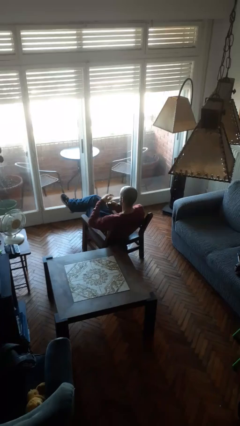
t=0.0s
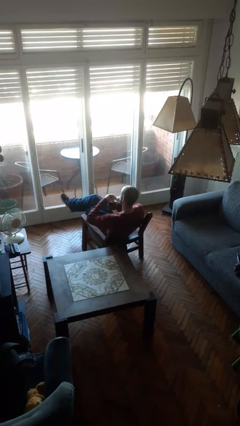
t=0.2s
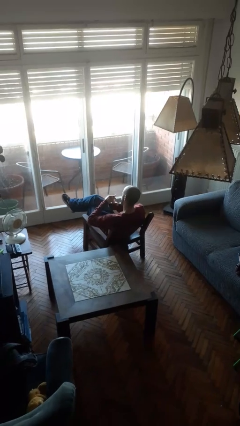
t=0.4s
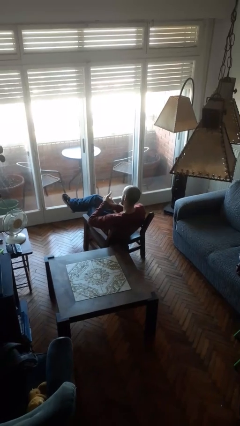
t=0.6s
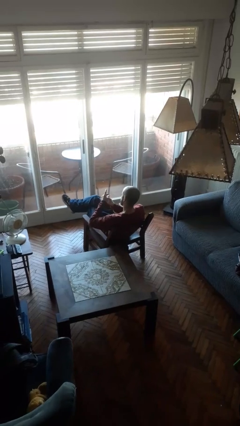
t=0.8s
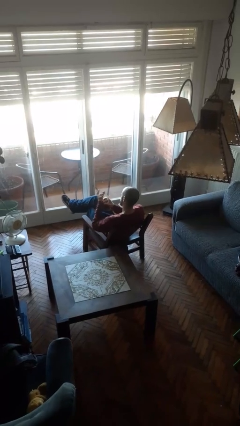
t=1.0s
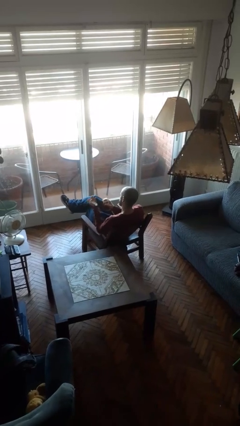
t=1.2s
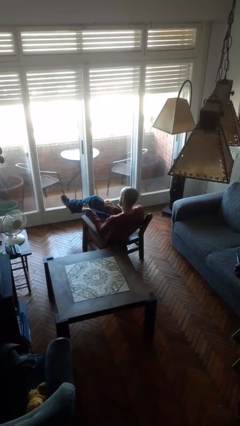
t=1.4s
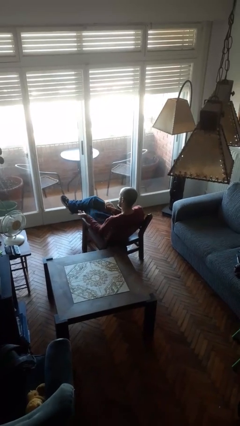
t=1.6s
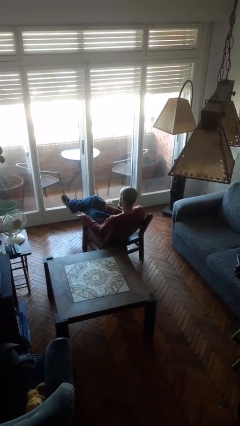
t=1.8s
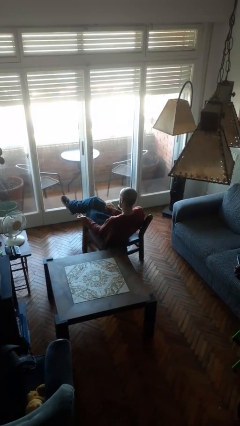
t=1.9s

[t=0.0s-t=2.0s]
person opens jar

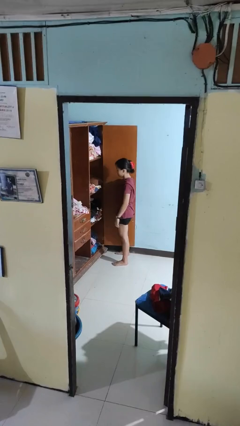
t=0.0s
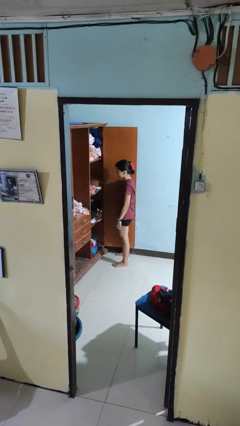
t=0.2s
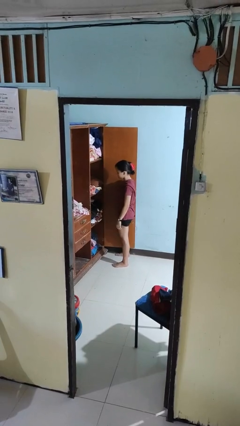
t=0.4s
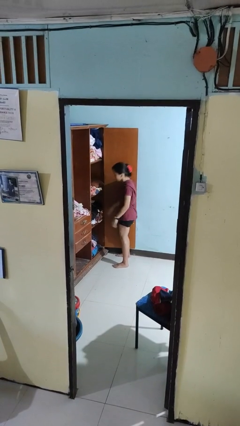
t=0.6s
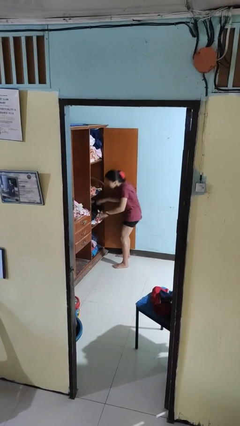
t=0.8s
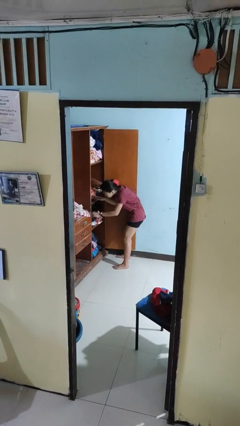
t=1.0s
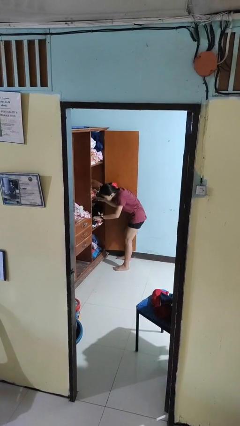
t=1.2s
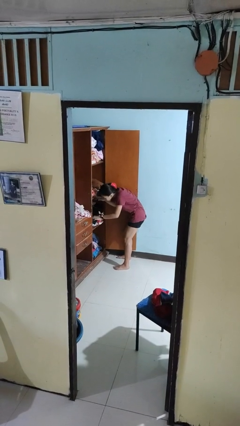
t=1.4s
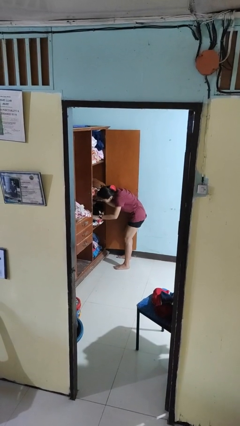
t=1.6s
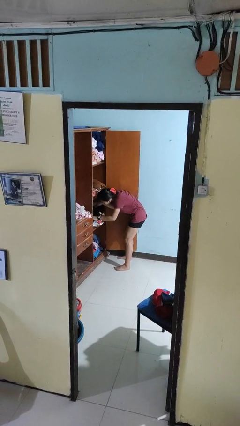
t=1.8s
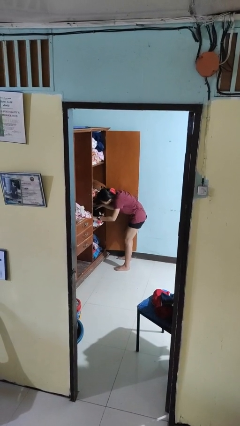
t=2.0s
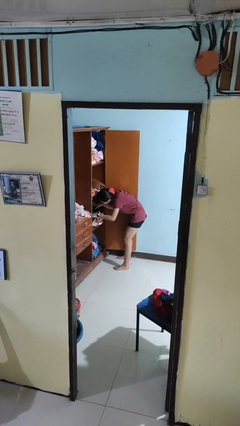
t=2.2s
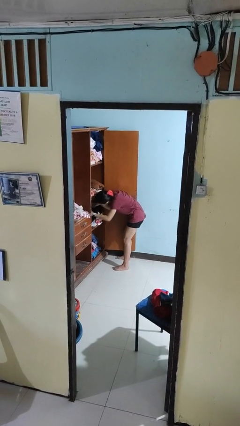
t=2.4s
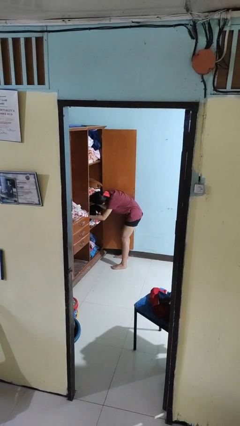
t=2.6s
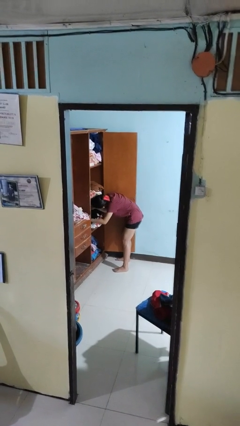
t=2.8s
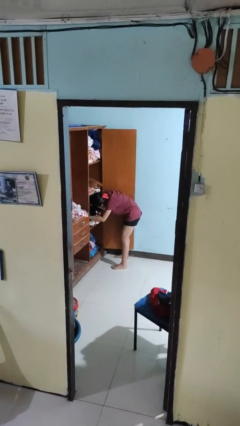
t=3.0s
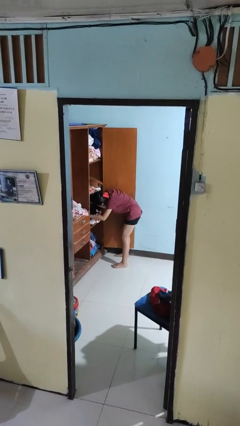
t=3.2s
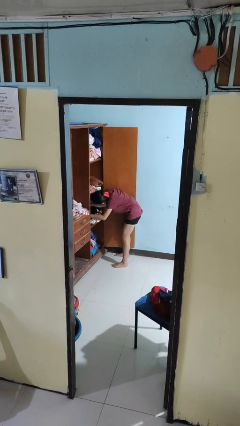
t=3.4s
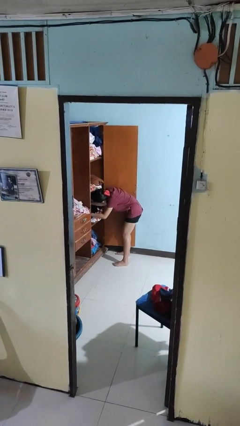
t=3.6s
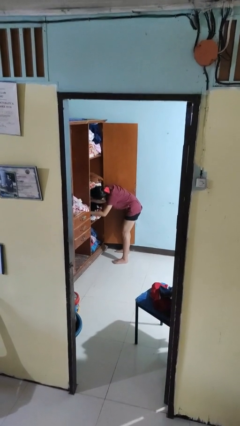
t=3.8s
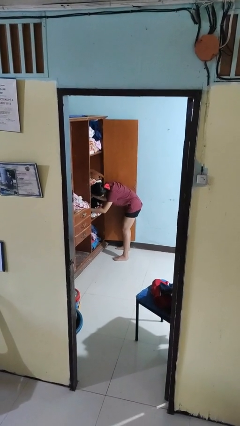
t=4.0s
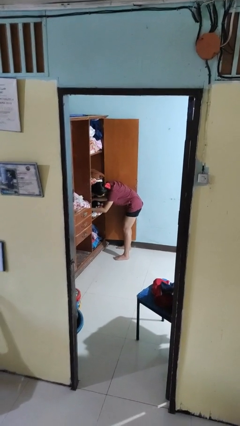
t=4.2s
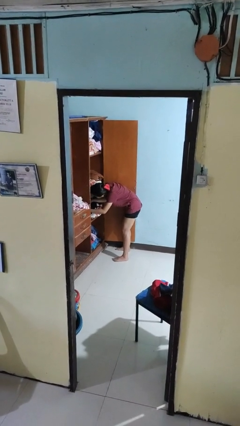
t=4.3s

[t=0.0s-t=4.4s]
person searches in cabinet

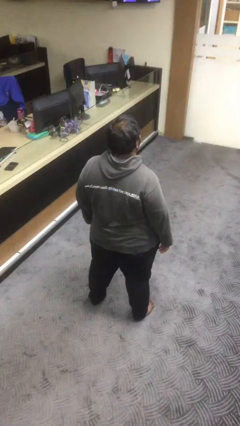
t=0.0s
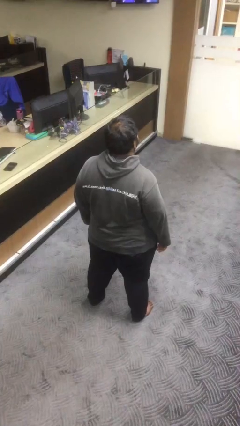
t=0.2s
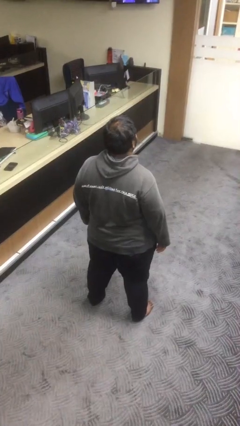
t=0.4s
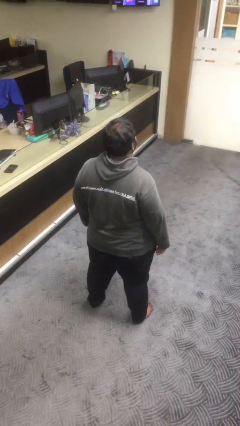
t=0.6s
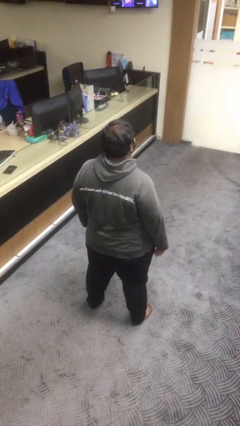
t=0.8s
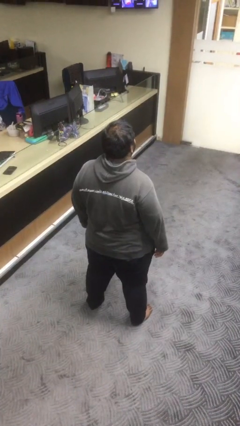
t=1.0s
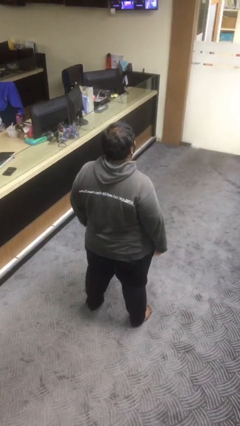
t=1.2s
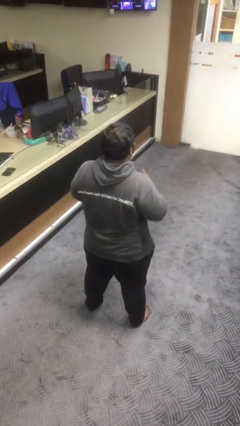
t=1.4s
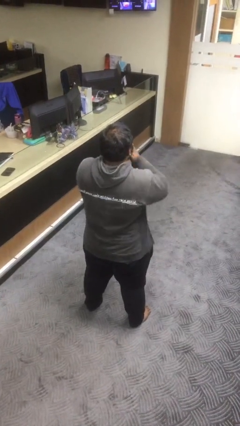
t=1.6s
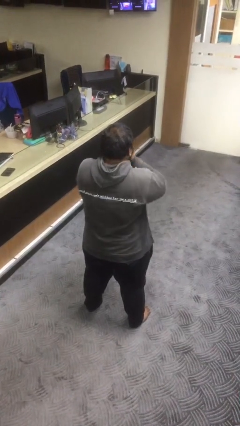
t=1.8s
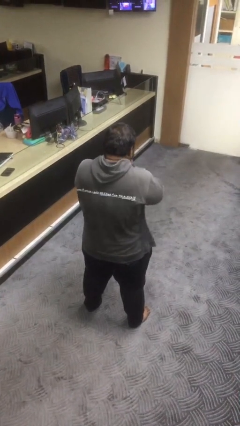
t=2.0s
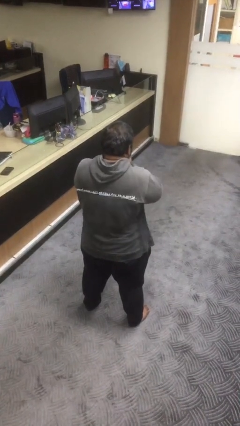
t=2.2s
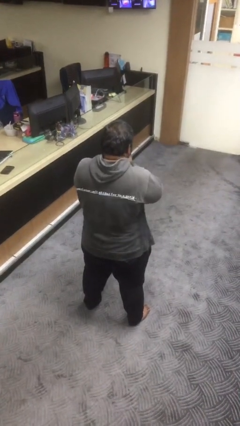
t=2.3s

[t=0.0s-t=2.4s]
person sneezes into hand

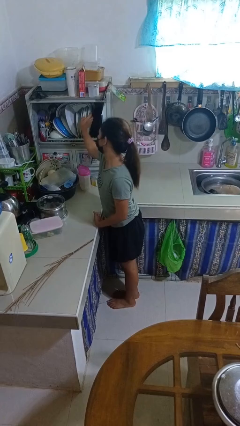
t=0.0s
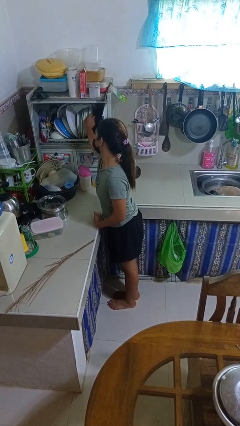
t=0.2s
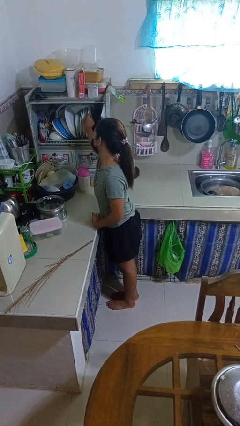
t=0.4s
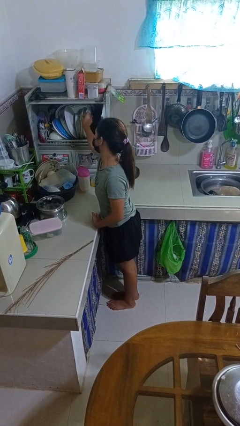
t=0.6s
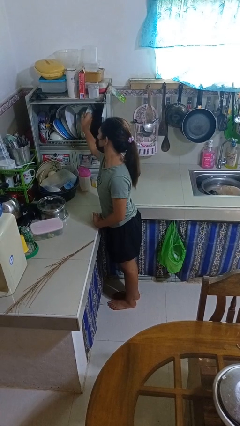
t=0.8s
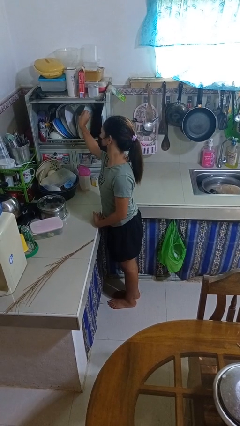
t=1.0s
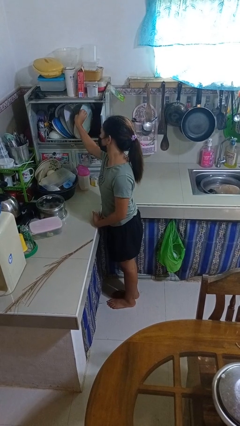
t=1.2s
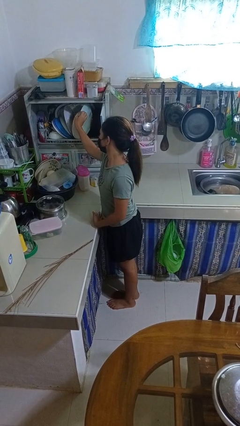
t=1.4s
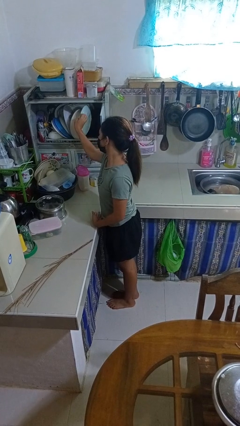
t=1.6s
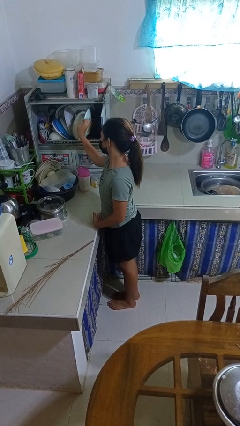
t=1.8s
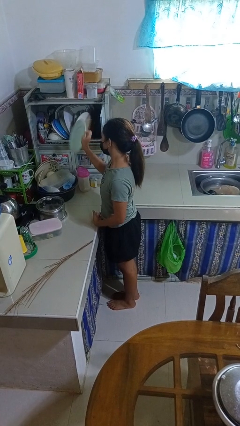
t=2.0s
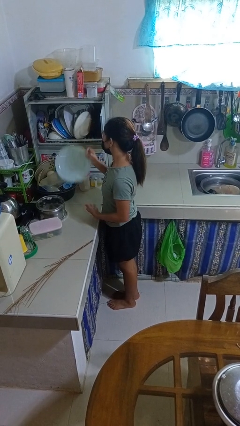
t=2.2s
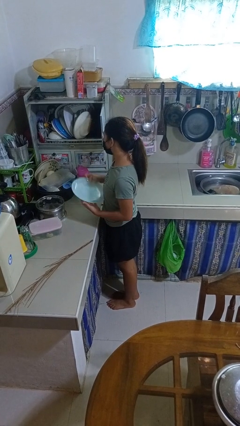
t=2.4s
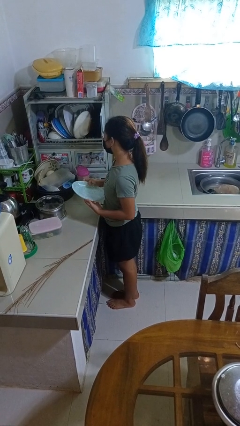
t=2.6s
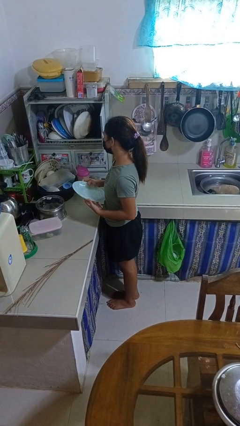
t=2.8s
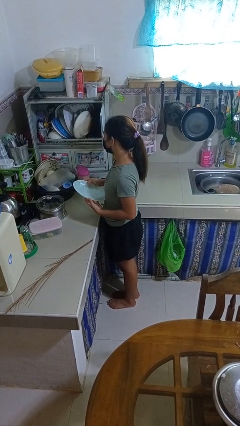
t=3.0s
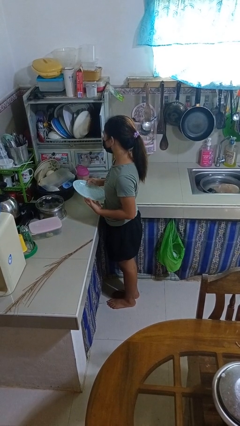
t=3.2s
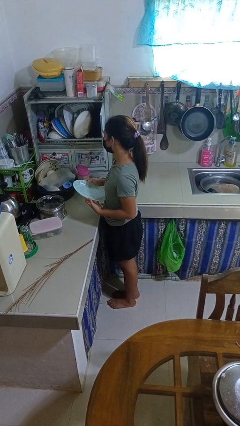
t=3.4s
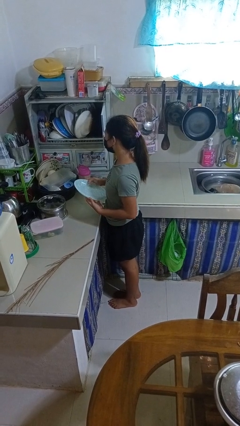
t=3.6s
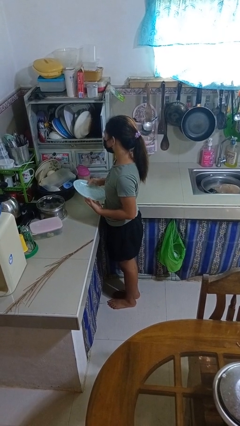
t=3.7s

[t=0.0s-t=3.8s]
person takes object from kitchen drawer

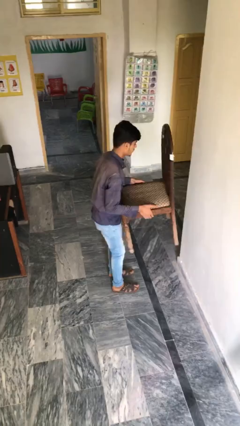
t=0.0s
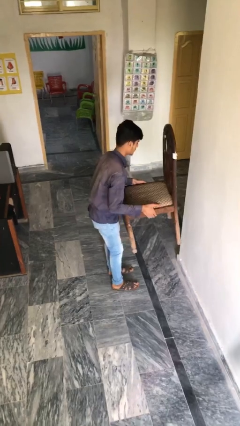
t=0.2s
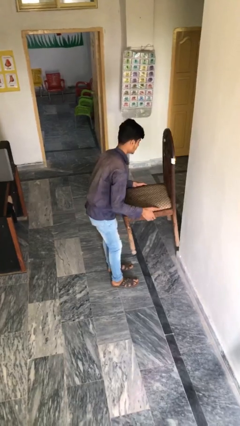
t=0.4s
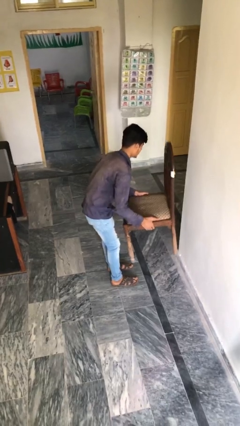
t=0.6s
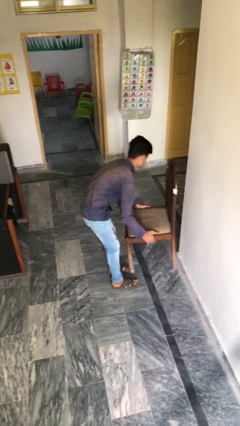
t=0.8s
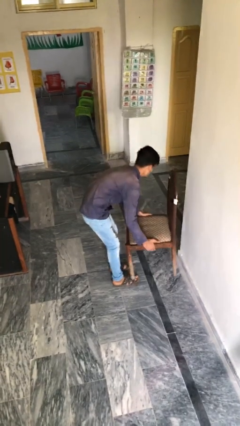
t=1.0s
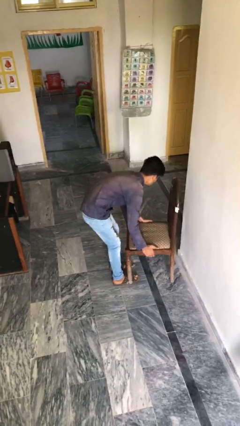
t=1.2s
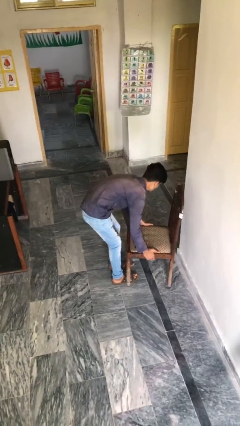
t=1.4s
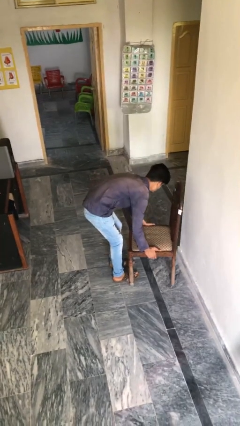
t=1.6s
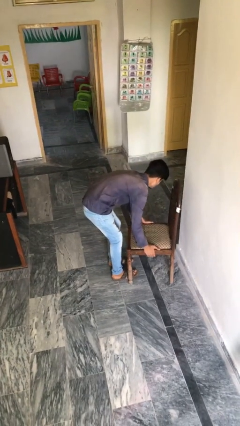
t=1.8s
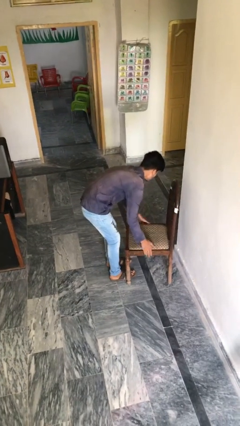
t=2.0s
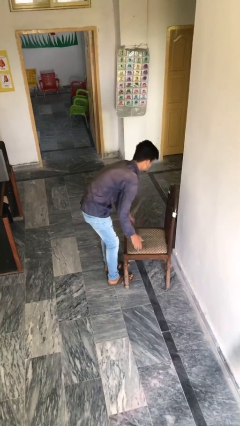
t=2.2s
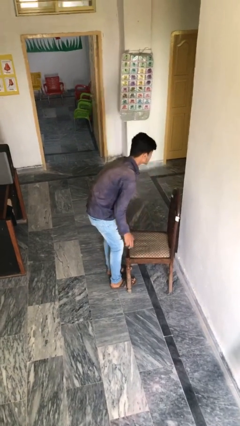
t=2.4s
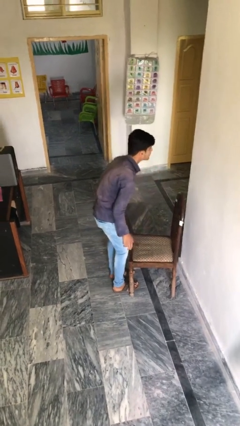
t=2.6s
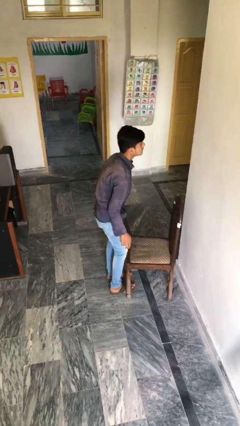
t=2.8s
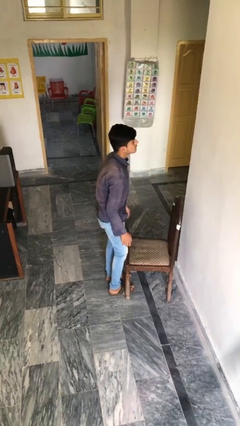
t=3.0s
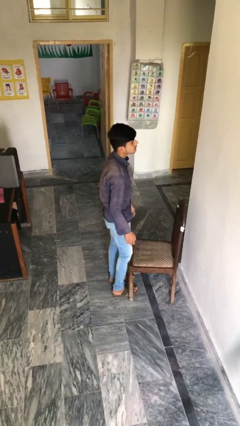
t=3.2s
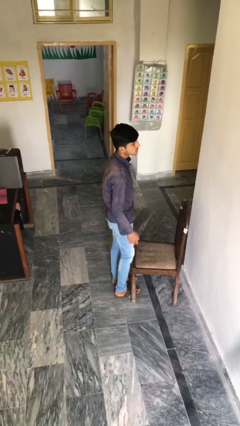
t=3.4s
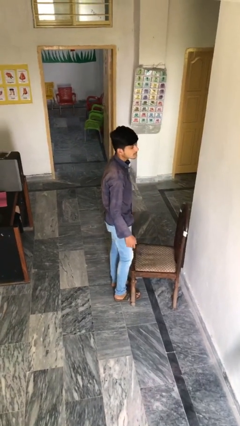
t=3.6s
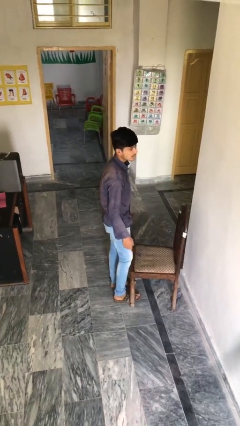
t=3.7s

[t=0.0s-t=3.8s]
person puts down object on floor

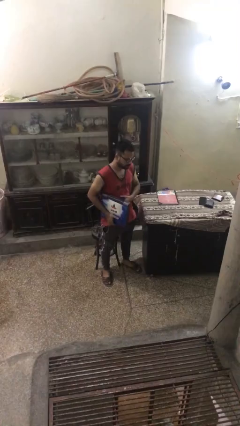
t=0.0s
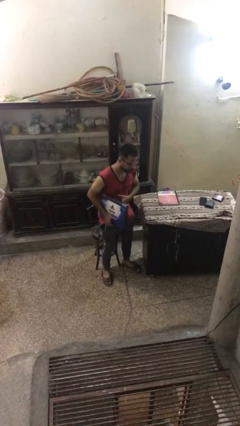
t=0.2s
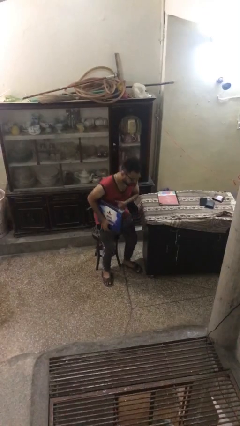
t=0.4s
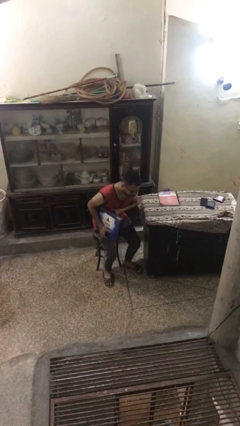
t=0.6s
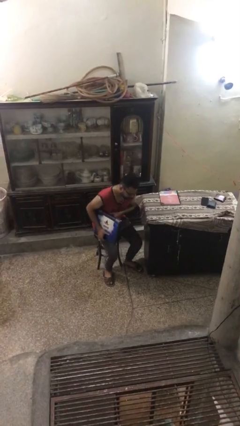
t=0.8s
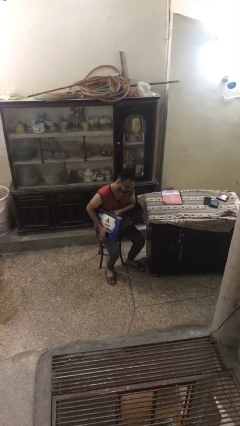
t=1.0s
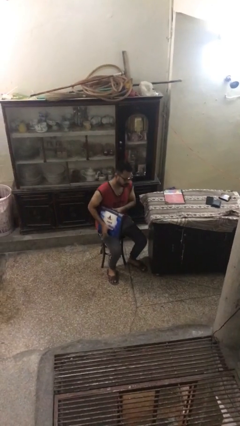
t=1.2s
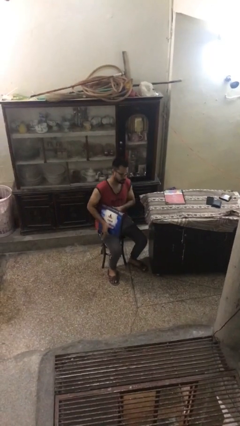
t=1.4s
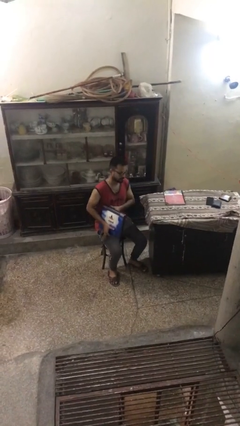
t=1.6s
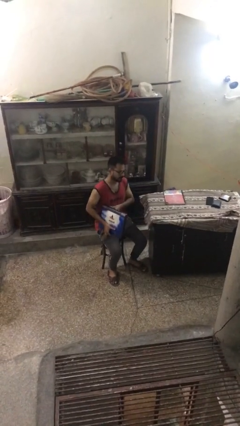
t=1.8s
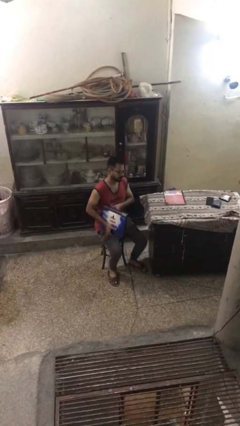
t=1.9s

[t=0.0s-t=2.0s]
person sits down
